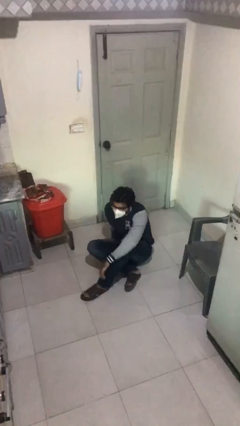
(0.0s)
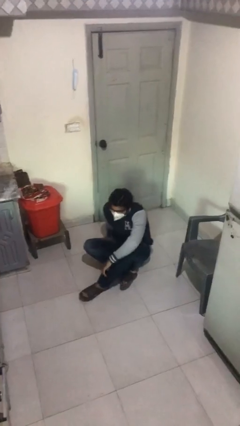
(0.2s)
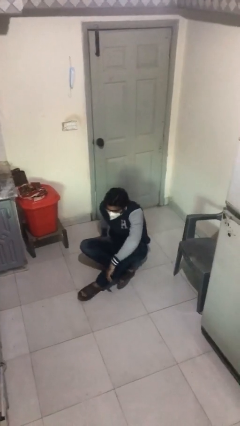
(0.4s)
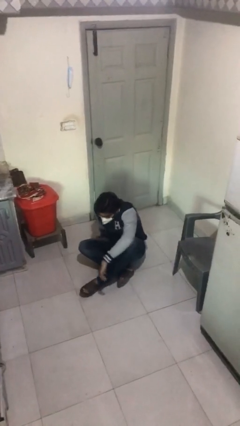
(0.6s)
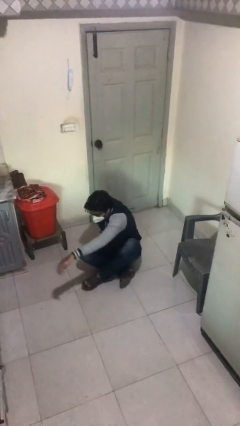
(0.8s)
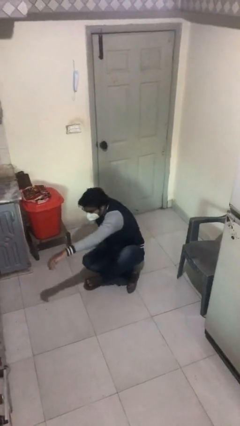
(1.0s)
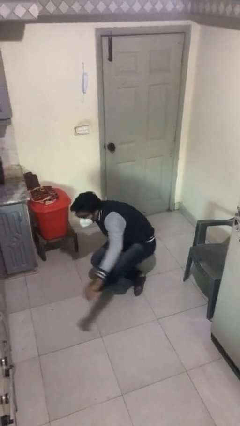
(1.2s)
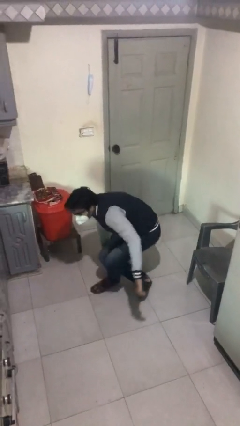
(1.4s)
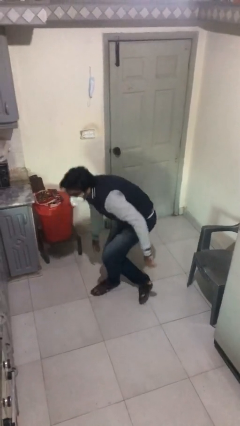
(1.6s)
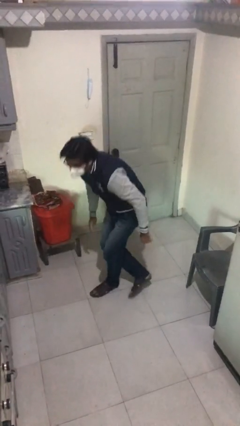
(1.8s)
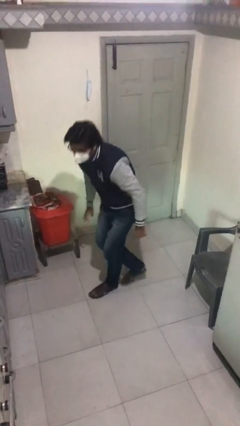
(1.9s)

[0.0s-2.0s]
person stands up

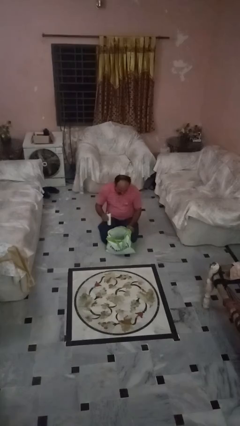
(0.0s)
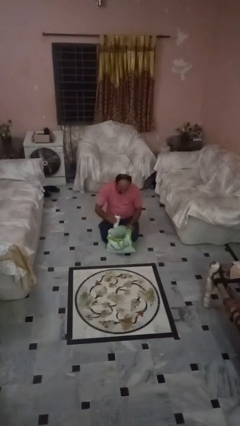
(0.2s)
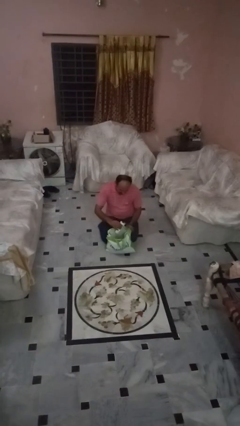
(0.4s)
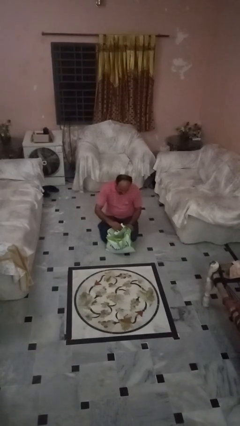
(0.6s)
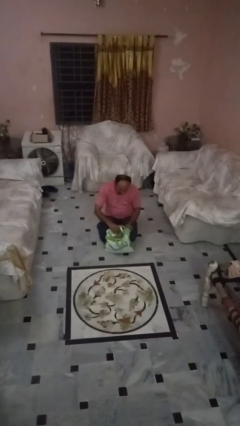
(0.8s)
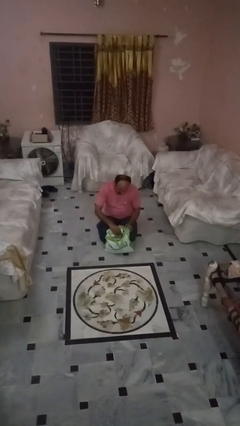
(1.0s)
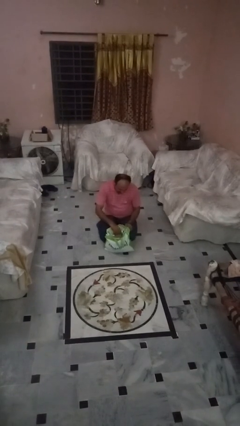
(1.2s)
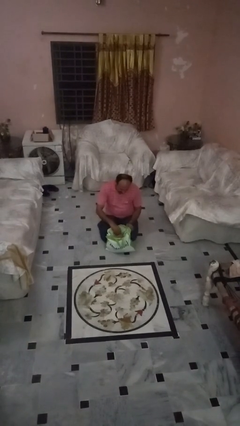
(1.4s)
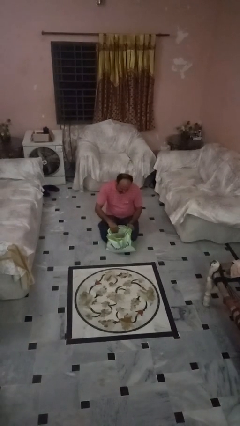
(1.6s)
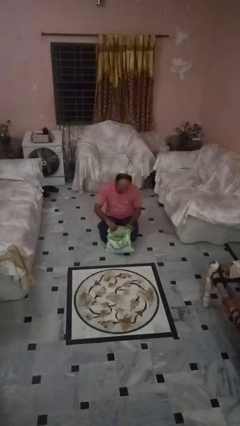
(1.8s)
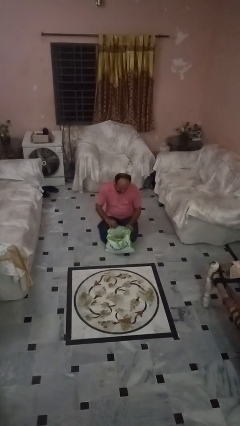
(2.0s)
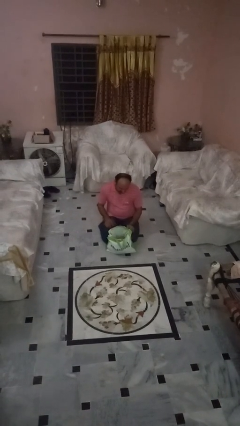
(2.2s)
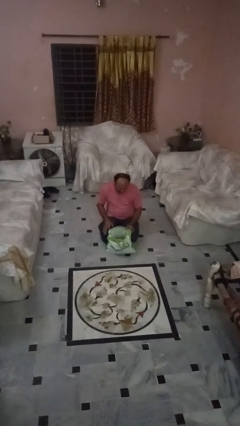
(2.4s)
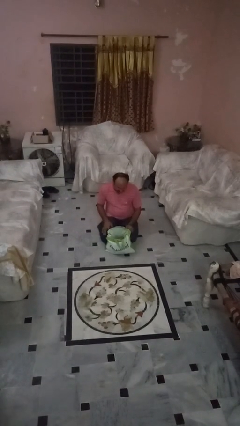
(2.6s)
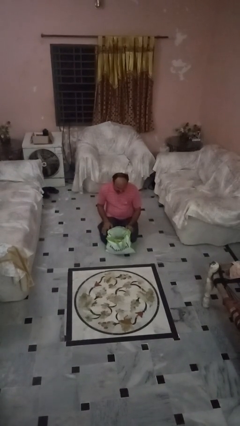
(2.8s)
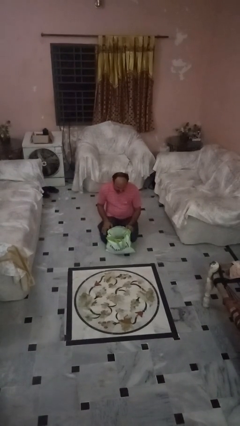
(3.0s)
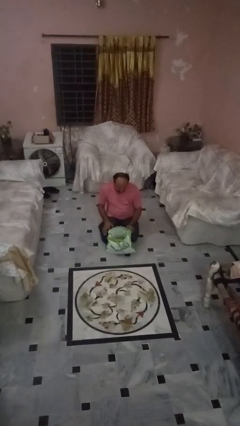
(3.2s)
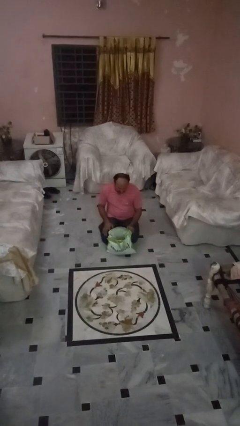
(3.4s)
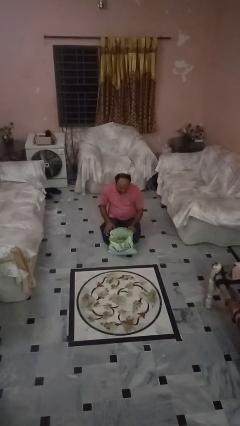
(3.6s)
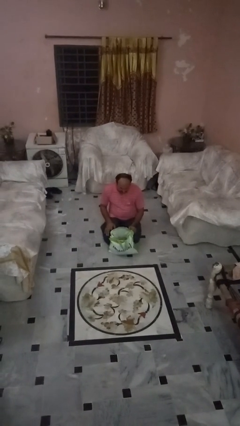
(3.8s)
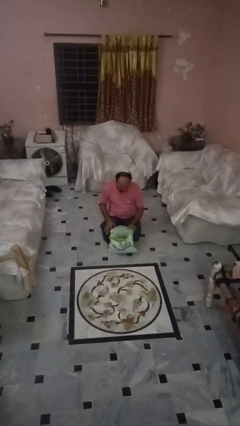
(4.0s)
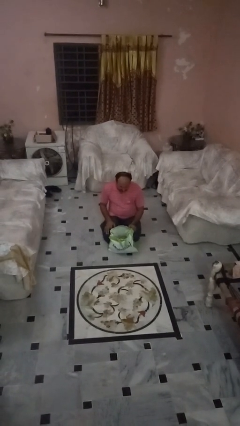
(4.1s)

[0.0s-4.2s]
person puts object into bag

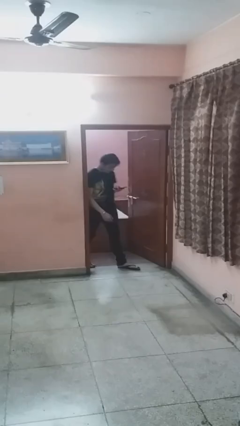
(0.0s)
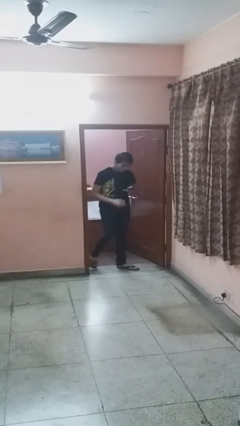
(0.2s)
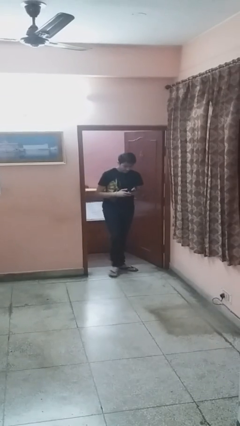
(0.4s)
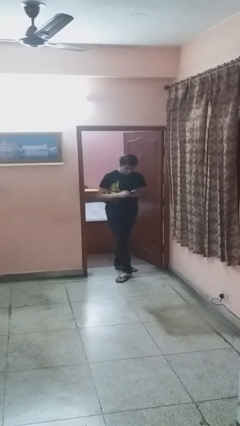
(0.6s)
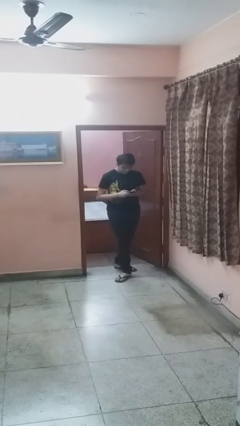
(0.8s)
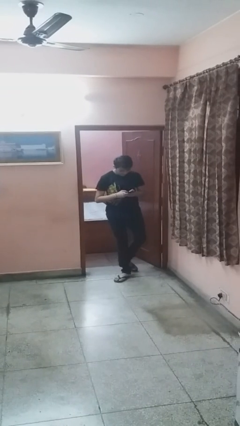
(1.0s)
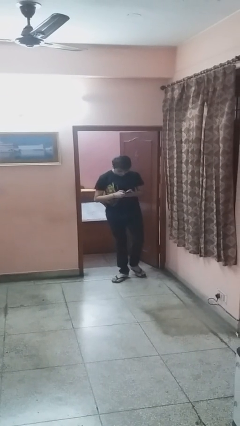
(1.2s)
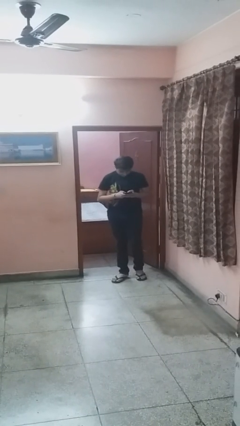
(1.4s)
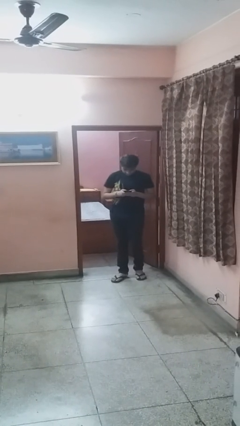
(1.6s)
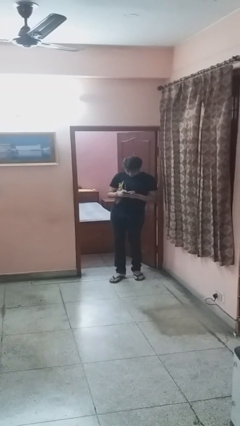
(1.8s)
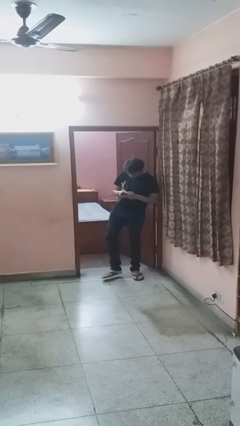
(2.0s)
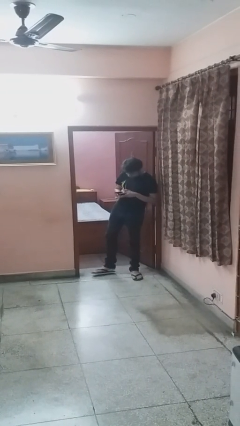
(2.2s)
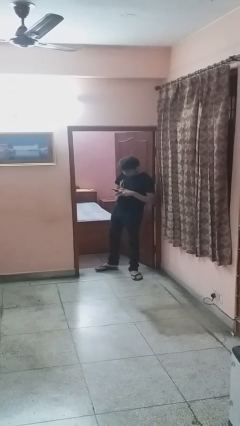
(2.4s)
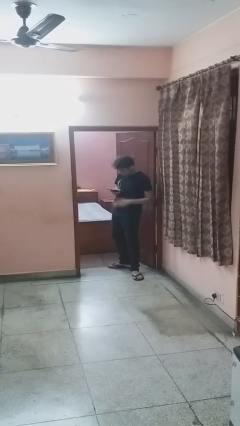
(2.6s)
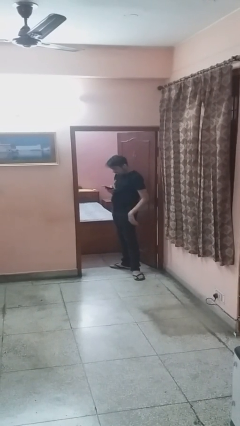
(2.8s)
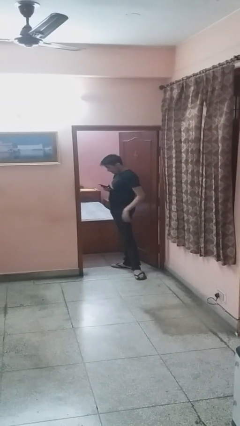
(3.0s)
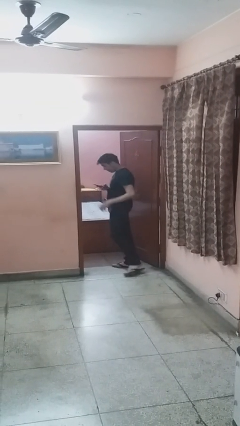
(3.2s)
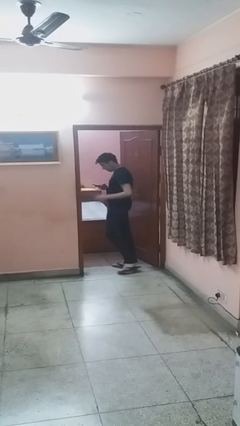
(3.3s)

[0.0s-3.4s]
person enters scene through structure

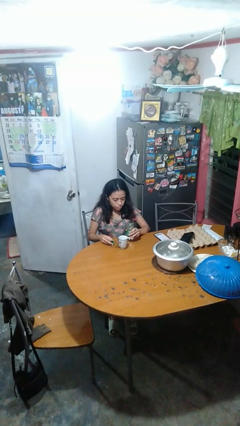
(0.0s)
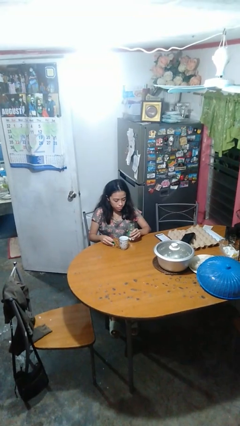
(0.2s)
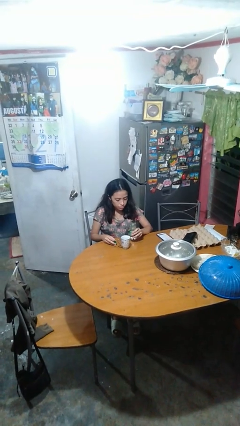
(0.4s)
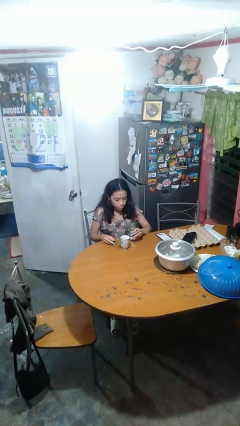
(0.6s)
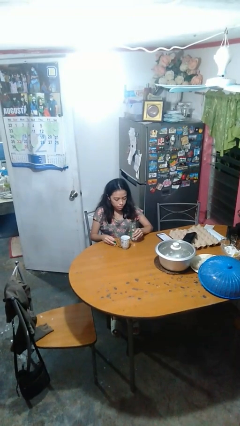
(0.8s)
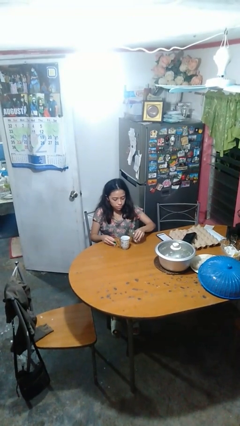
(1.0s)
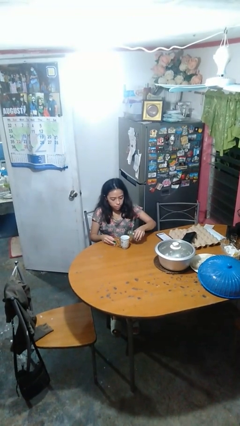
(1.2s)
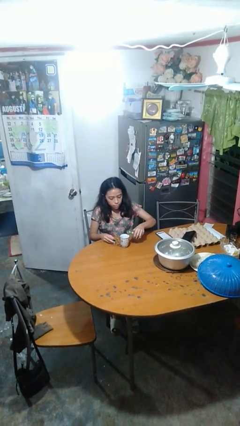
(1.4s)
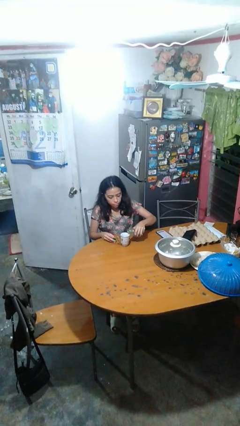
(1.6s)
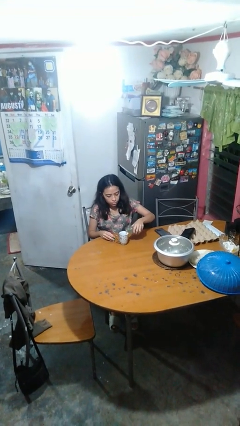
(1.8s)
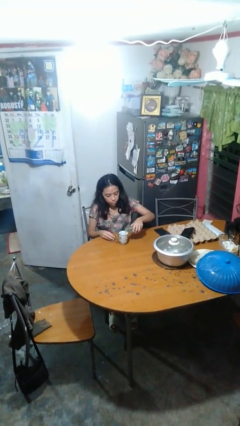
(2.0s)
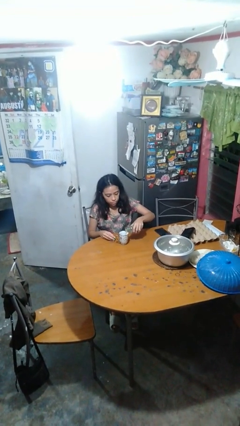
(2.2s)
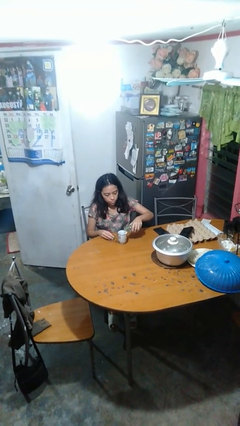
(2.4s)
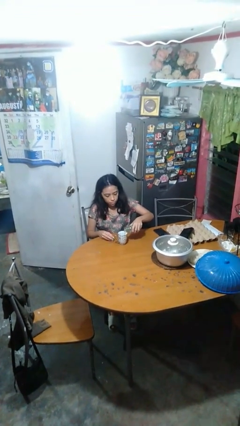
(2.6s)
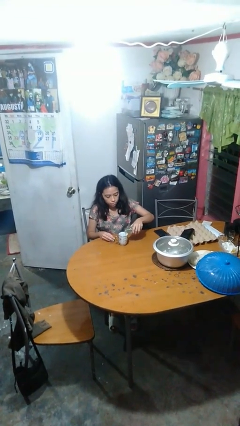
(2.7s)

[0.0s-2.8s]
person pours liquid into cup

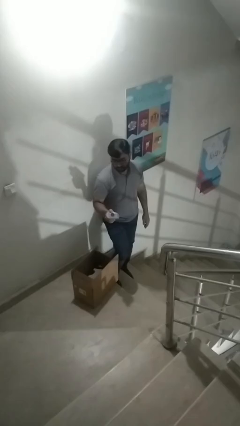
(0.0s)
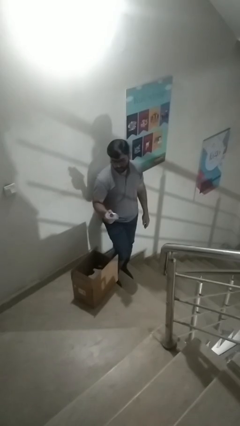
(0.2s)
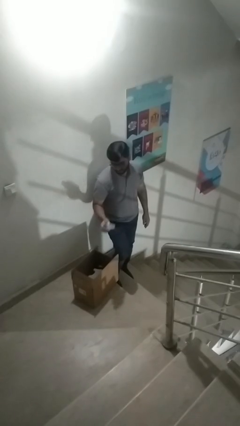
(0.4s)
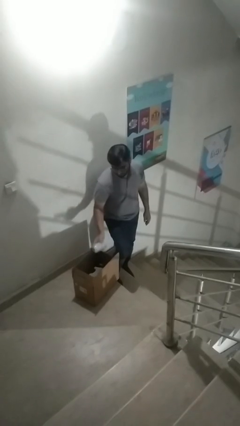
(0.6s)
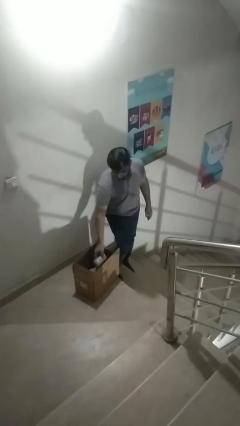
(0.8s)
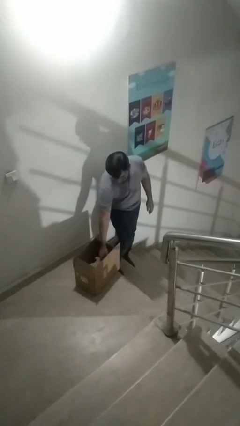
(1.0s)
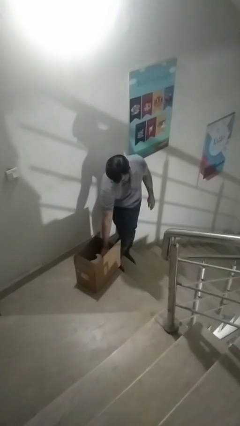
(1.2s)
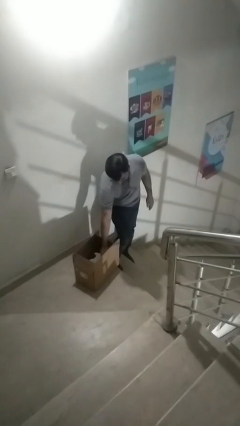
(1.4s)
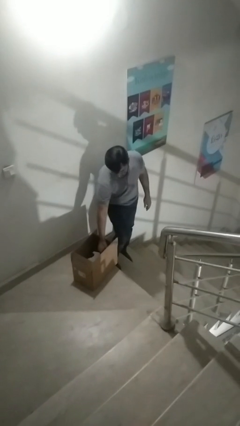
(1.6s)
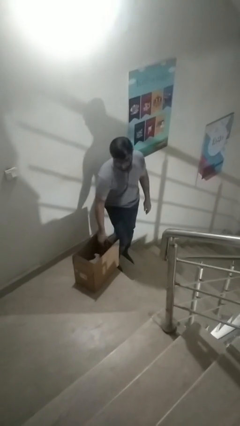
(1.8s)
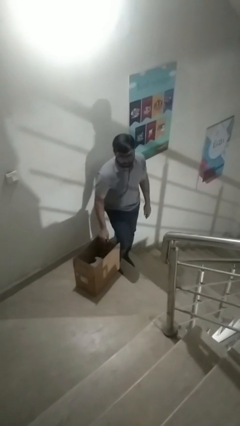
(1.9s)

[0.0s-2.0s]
person puts object into box

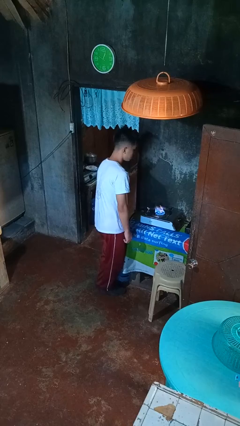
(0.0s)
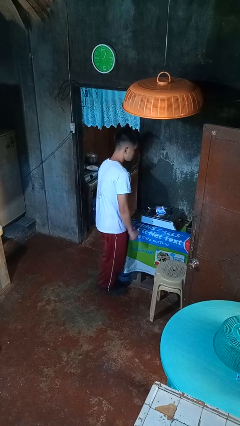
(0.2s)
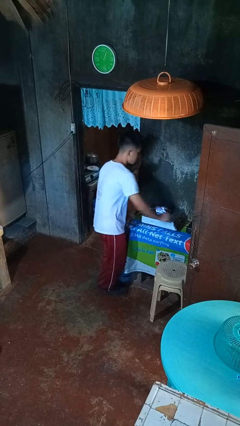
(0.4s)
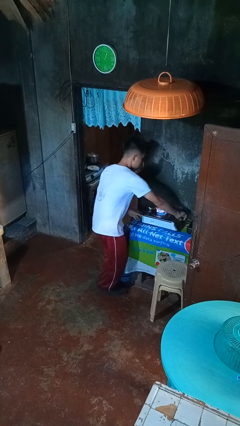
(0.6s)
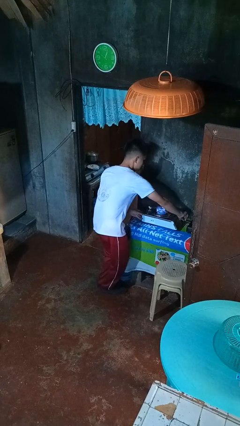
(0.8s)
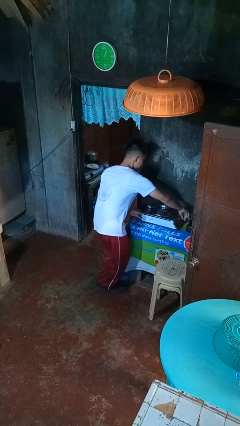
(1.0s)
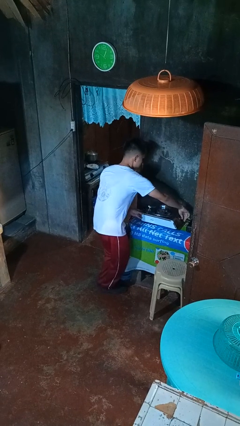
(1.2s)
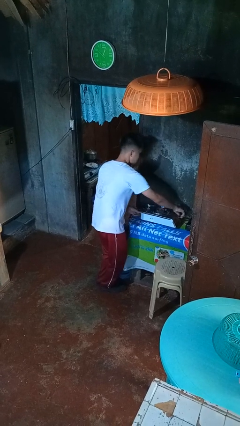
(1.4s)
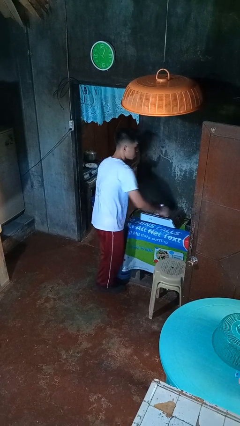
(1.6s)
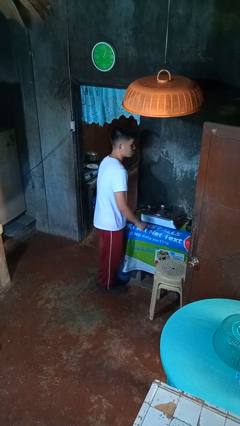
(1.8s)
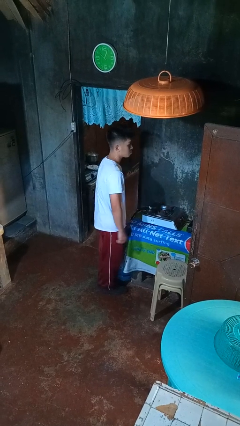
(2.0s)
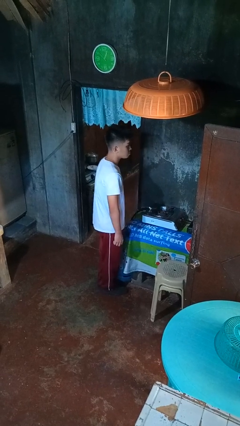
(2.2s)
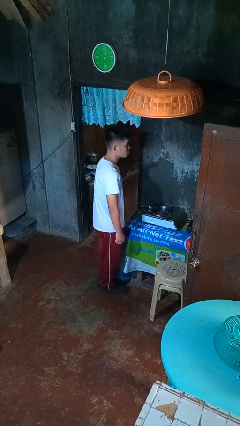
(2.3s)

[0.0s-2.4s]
person turns off stovetop

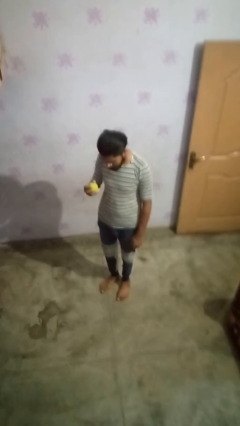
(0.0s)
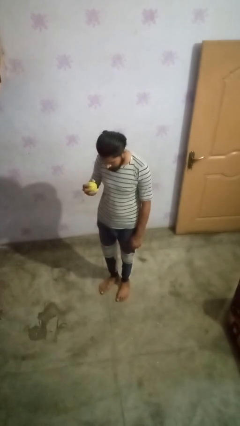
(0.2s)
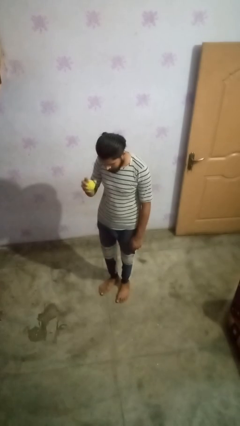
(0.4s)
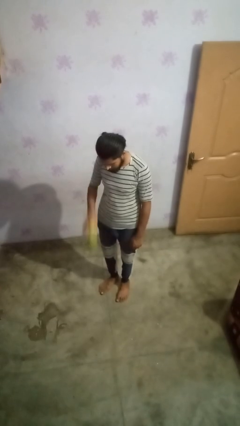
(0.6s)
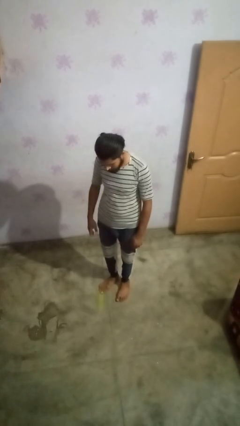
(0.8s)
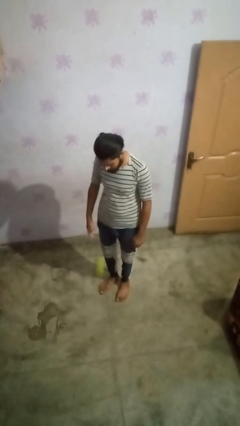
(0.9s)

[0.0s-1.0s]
person bounces ball on floor
